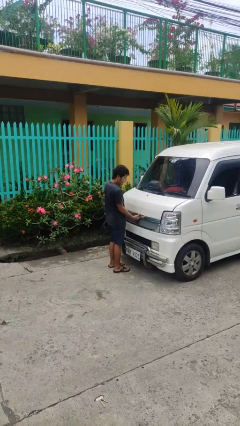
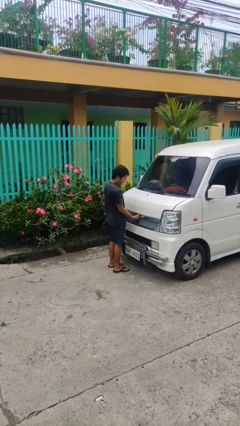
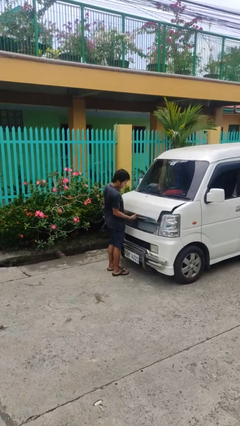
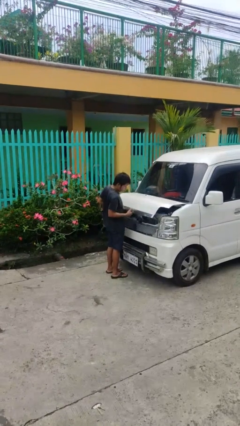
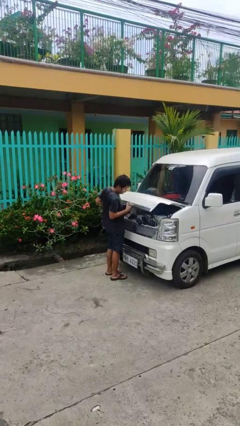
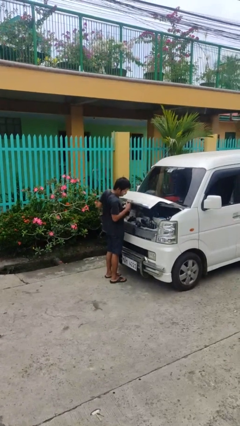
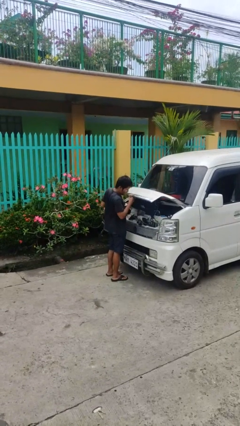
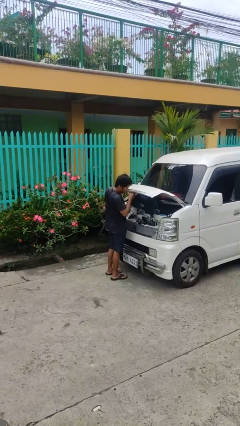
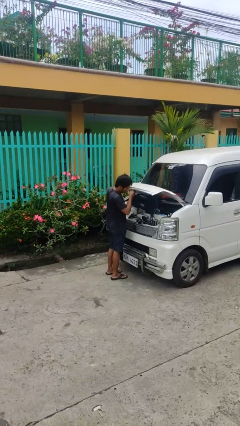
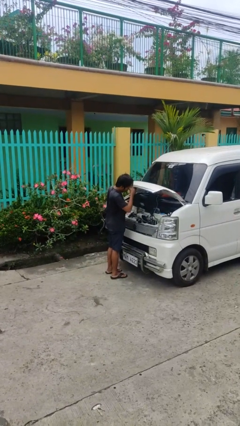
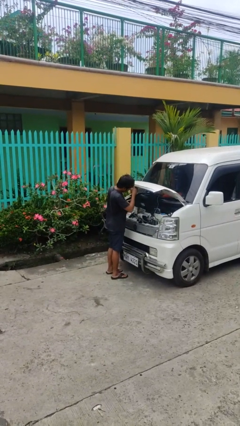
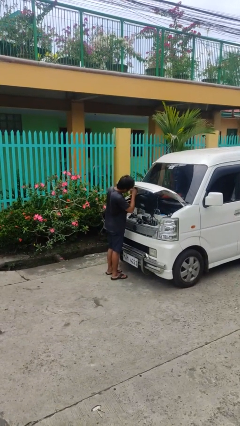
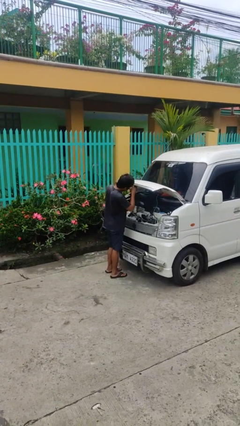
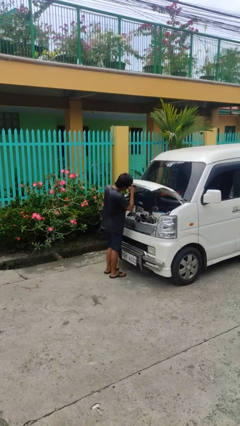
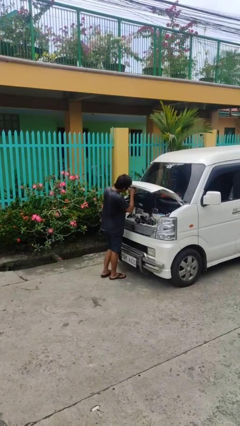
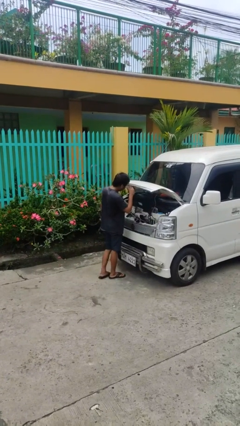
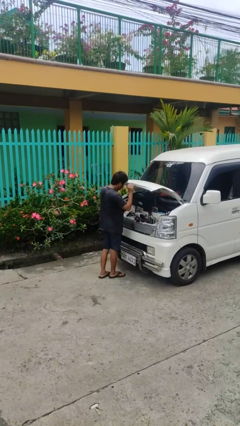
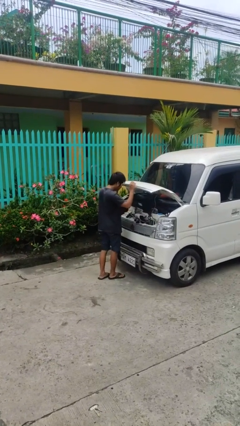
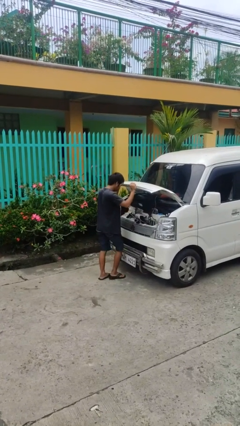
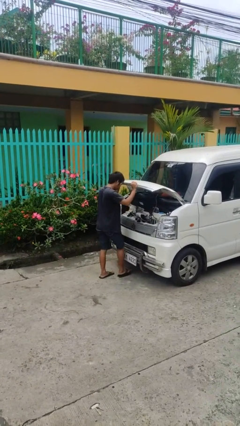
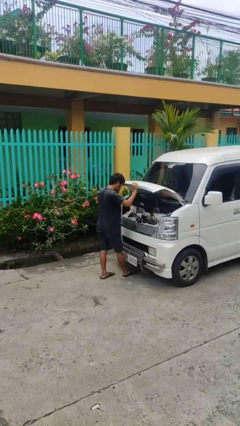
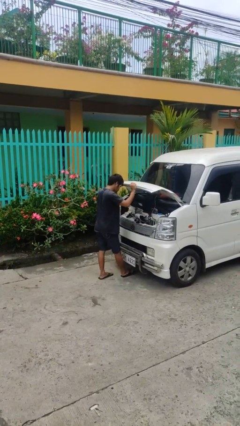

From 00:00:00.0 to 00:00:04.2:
person opens car hood

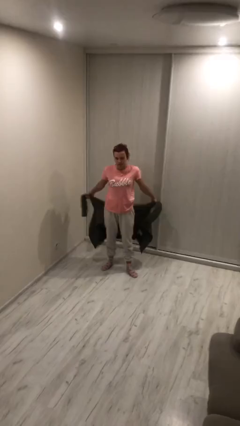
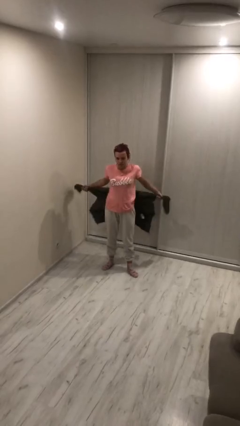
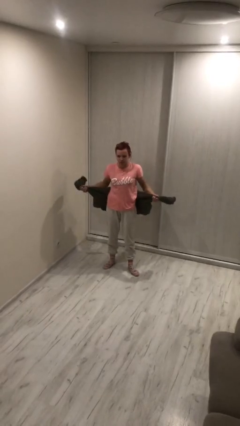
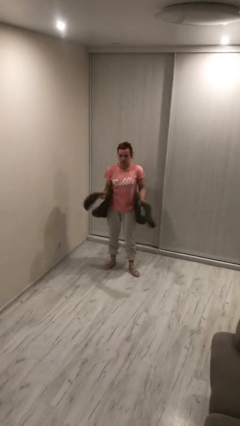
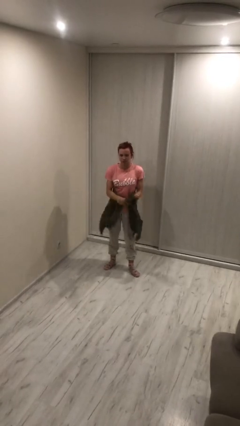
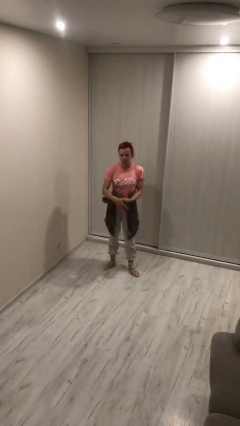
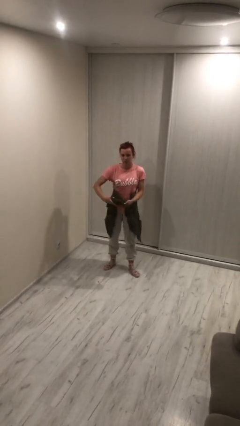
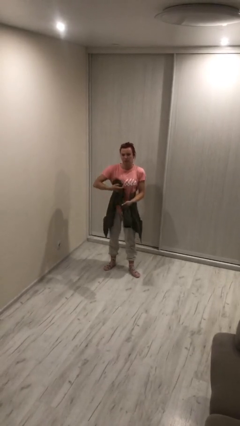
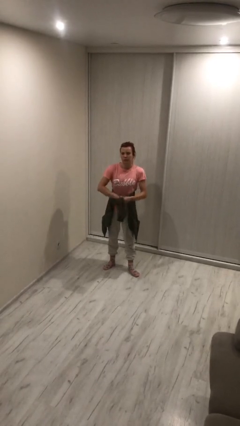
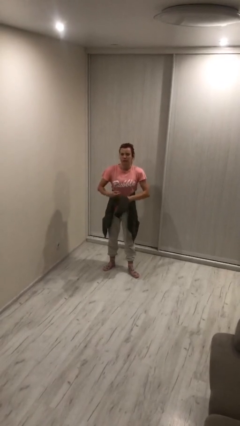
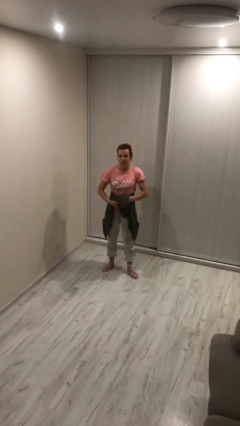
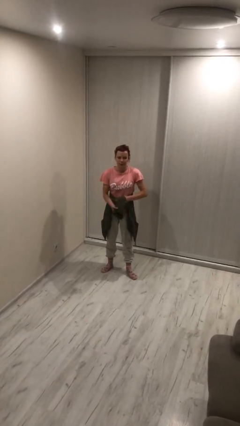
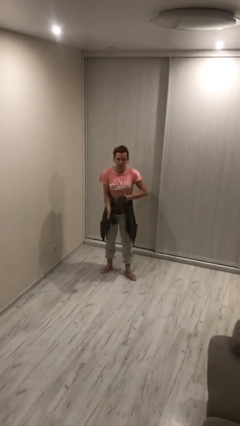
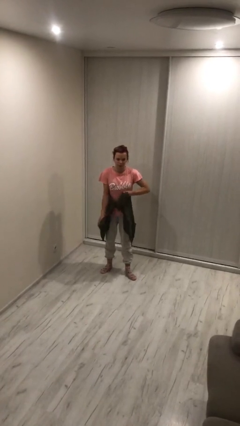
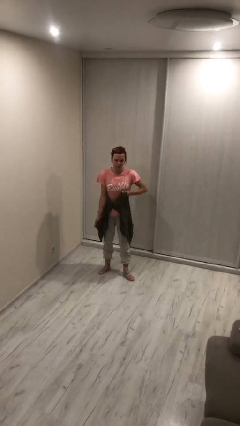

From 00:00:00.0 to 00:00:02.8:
person ties jacket around waist

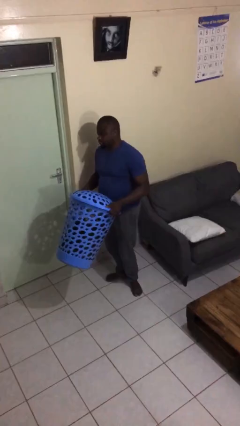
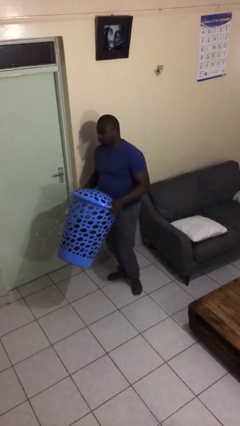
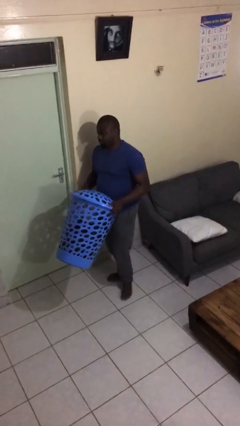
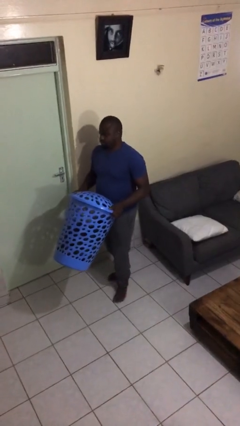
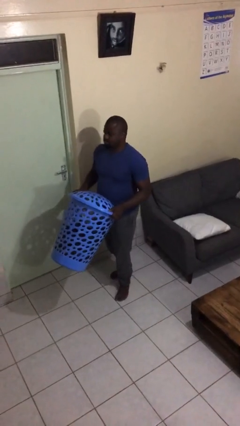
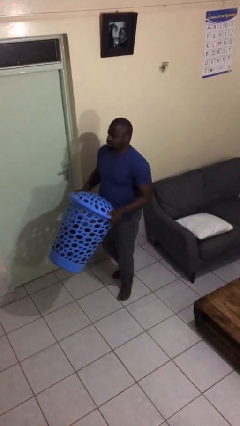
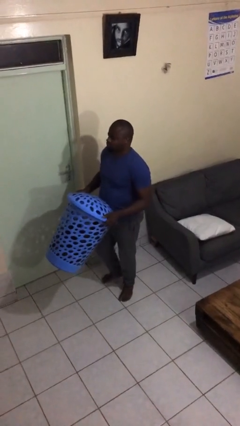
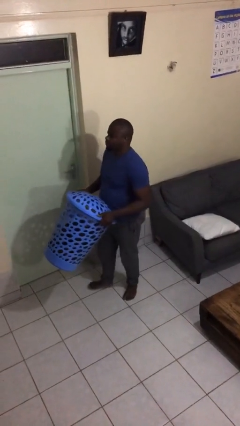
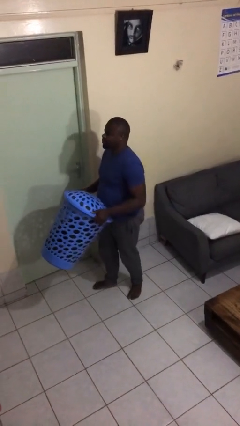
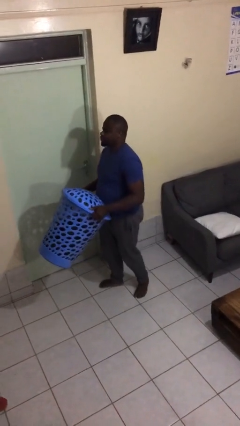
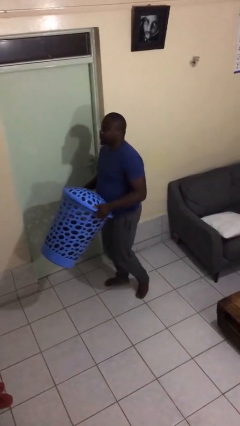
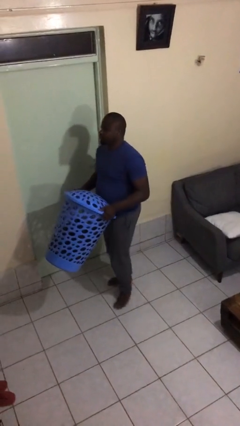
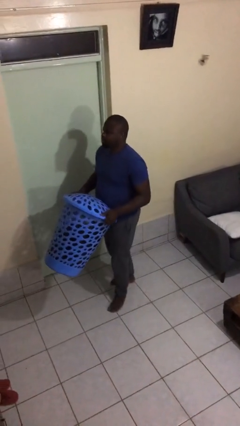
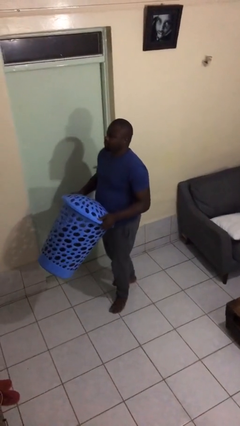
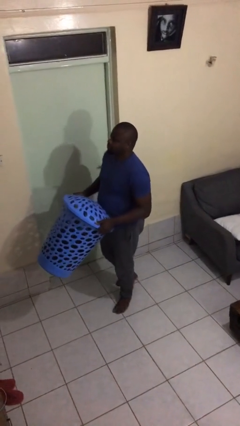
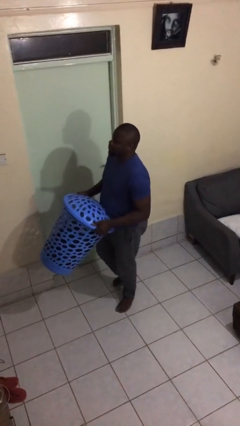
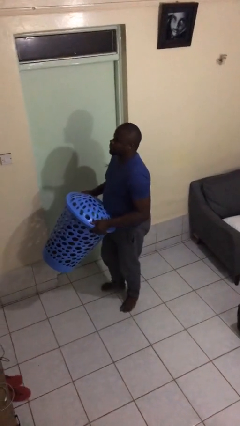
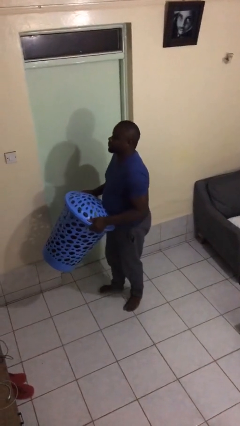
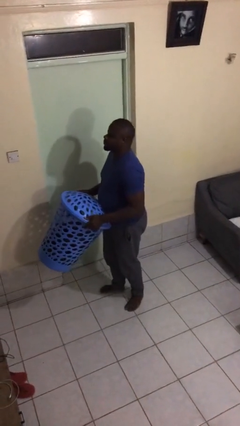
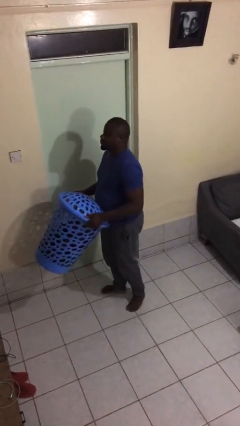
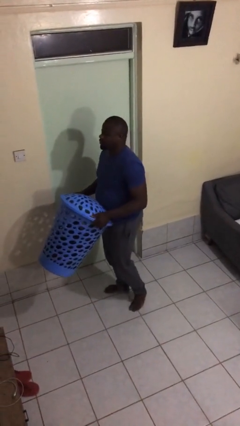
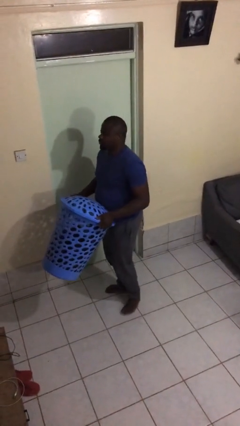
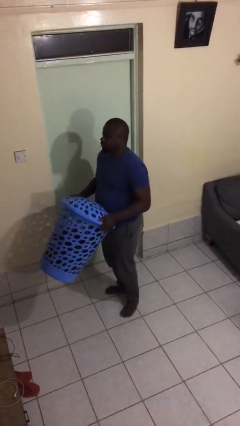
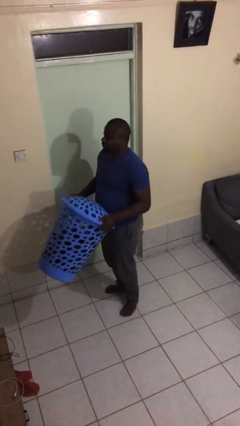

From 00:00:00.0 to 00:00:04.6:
person carries laundry basket

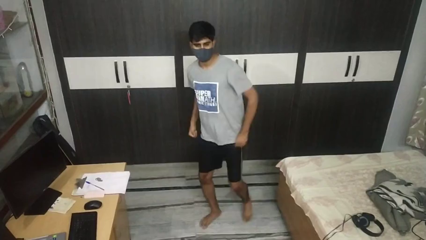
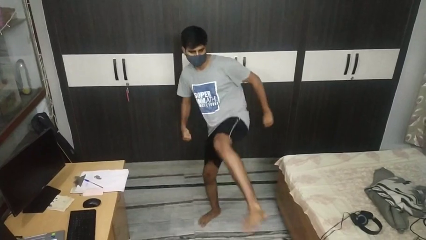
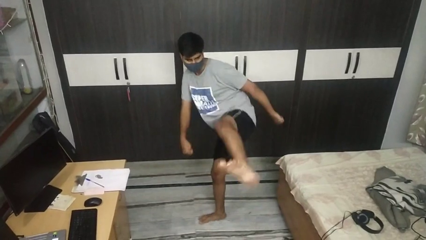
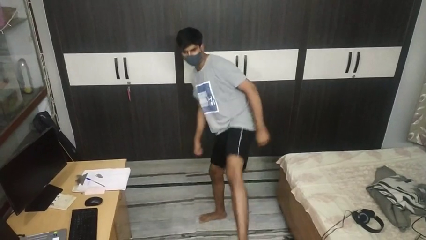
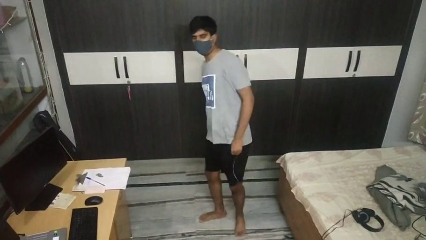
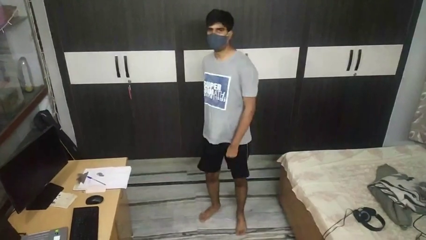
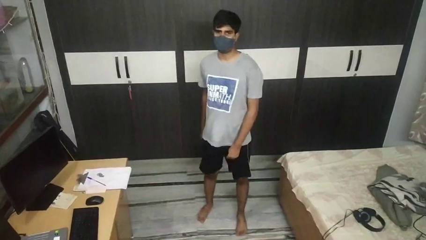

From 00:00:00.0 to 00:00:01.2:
person karate kicks

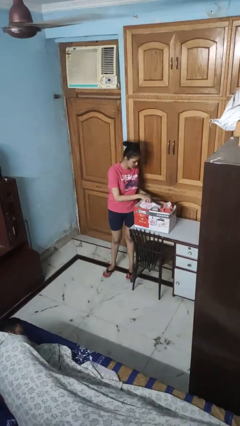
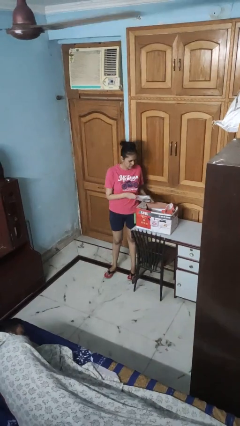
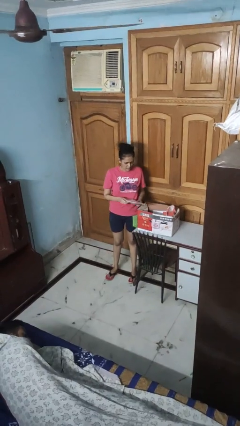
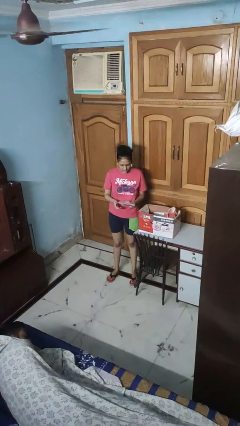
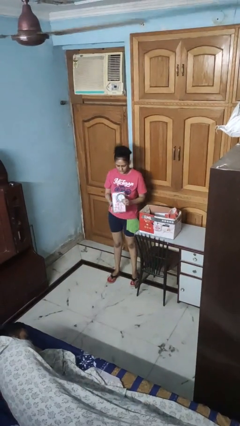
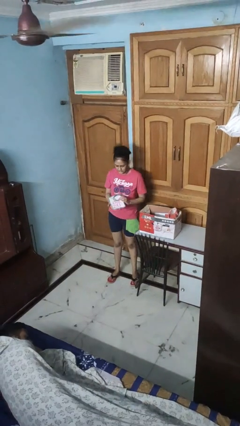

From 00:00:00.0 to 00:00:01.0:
person takes object from box

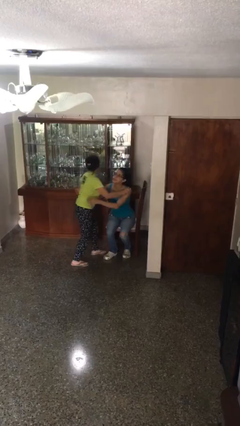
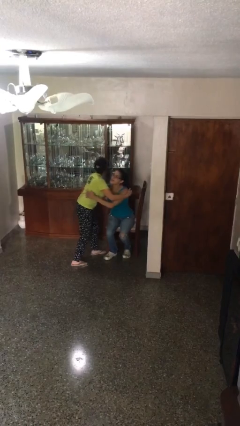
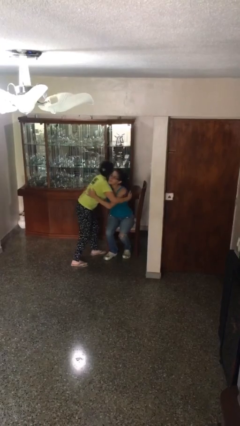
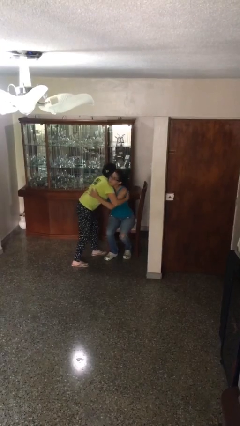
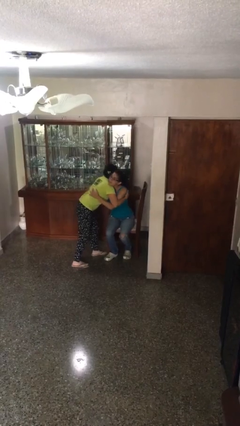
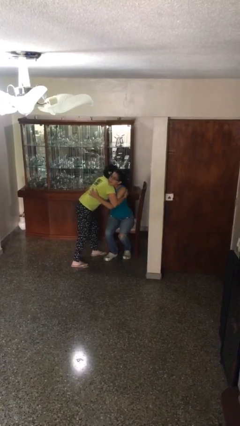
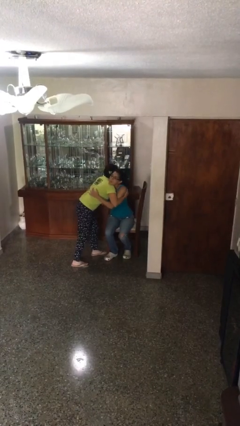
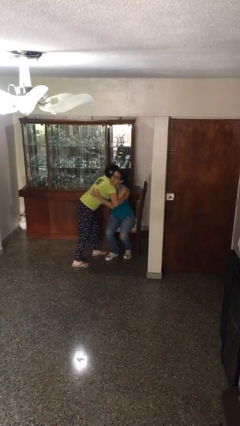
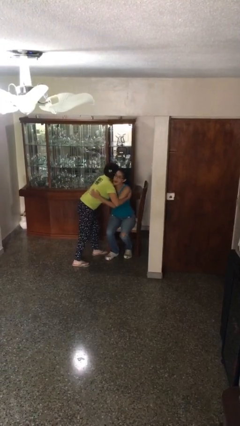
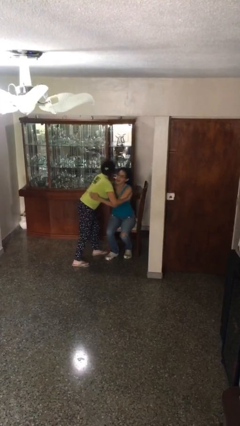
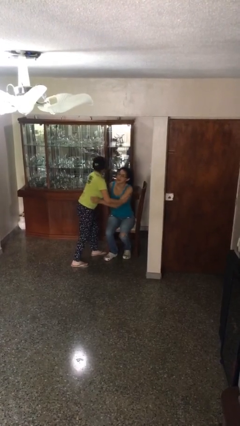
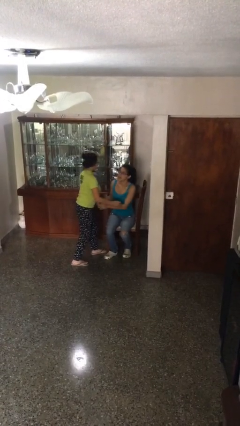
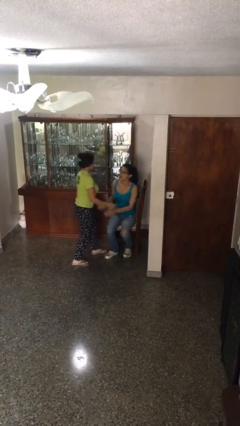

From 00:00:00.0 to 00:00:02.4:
person embraces person

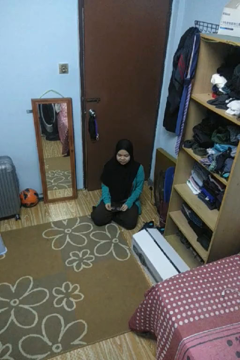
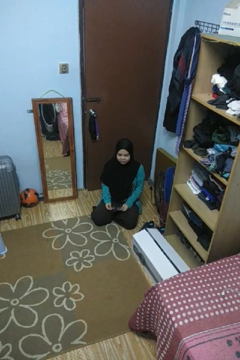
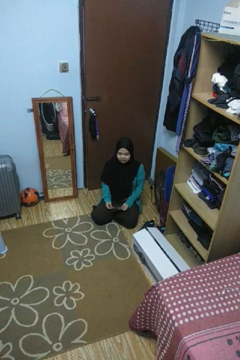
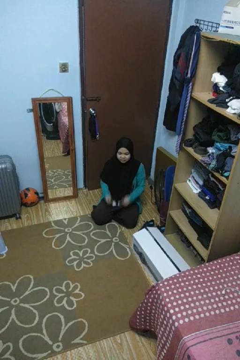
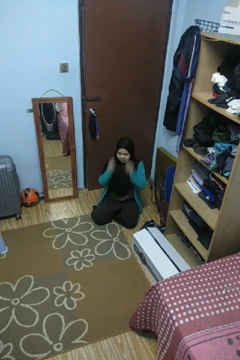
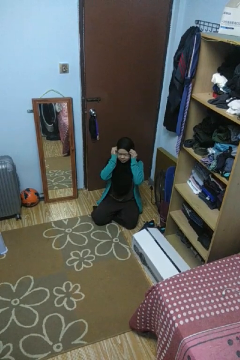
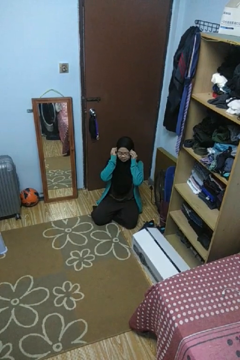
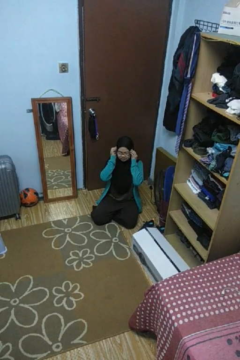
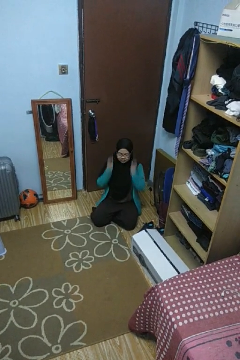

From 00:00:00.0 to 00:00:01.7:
person puts on glasses
